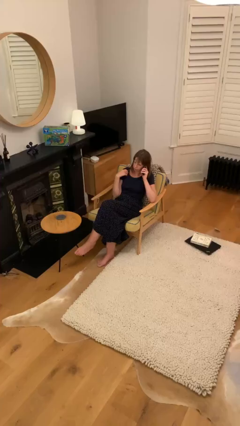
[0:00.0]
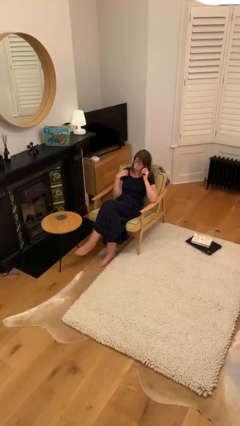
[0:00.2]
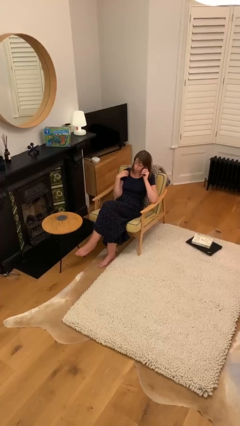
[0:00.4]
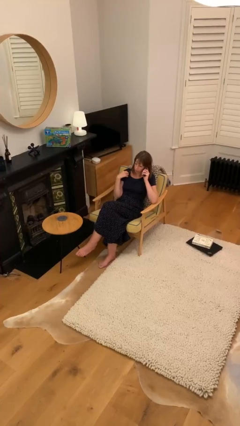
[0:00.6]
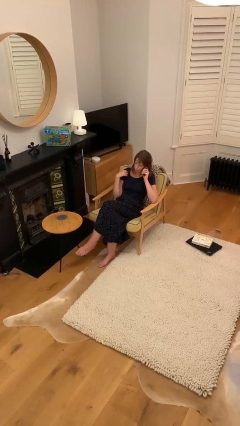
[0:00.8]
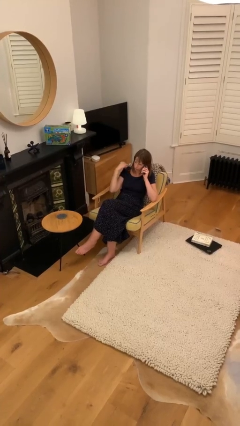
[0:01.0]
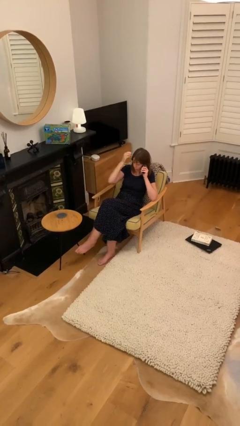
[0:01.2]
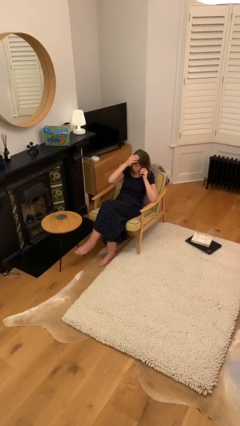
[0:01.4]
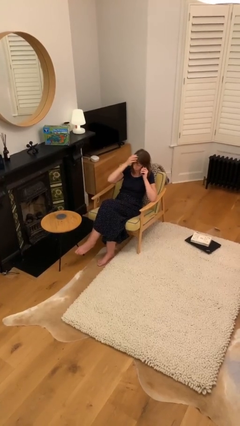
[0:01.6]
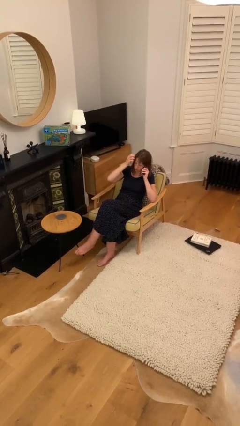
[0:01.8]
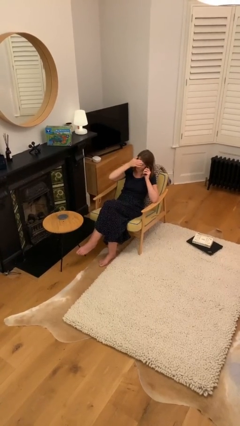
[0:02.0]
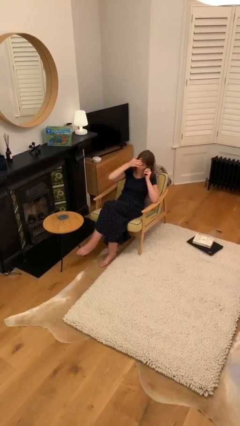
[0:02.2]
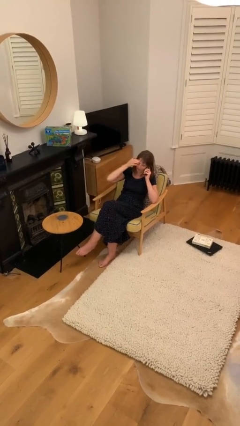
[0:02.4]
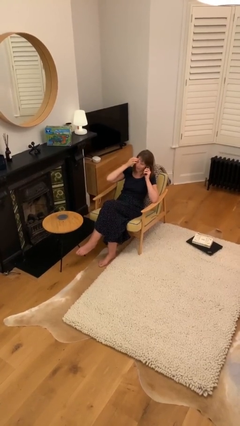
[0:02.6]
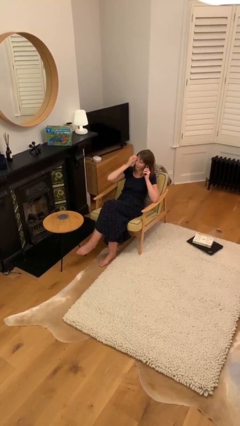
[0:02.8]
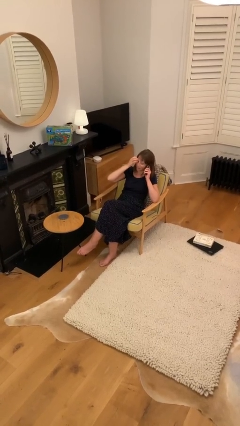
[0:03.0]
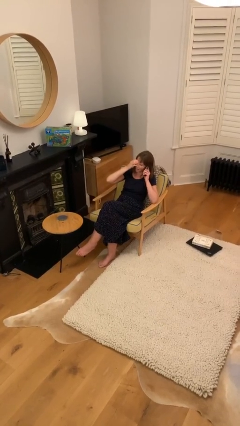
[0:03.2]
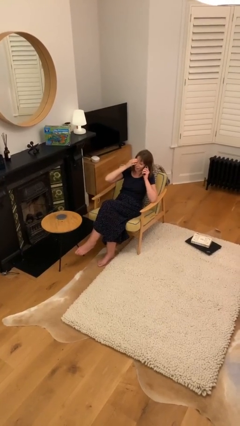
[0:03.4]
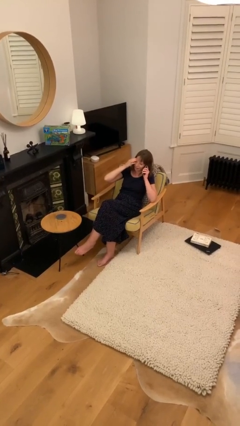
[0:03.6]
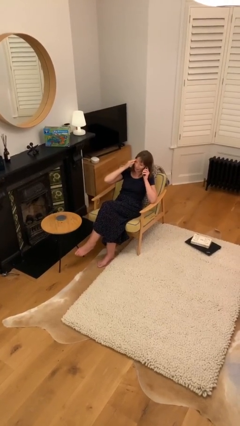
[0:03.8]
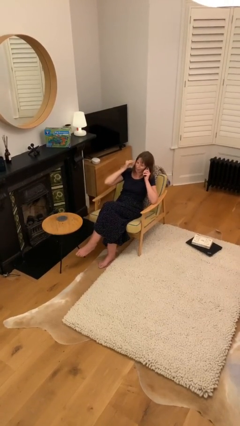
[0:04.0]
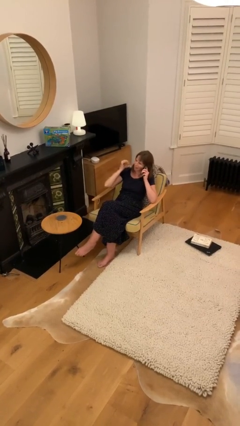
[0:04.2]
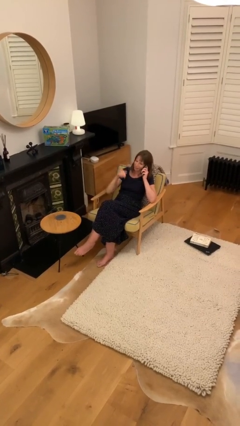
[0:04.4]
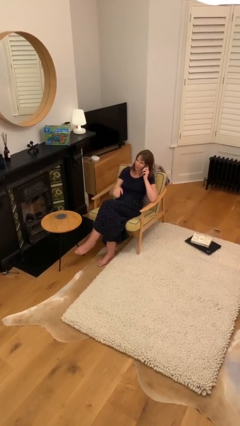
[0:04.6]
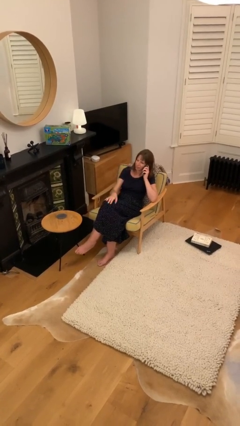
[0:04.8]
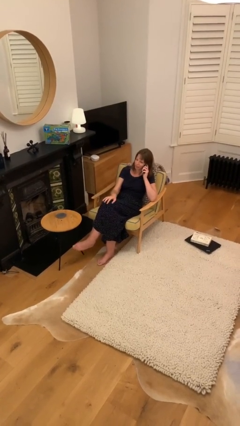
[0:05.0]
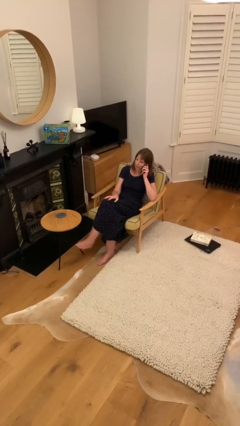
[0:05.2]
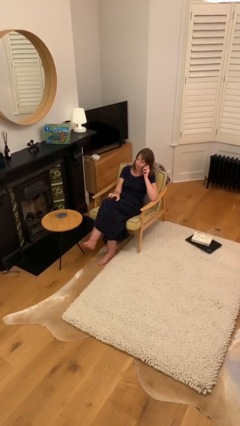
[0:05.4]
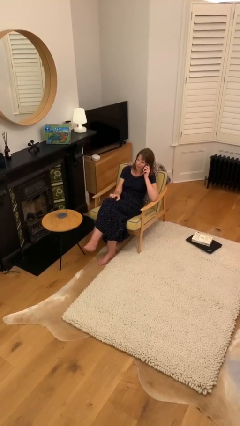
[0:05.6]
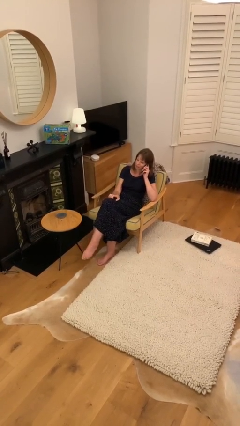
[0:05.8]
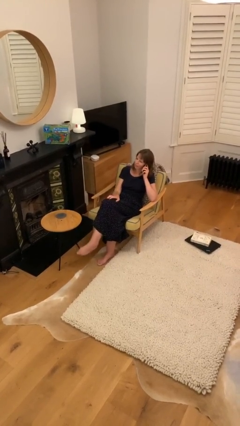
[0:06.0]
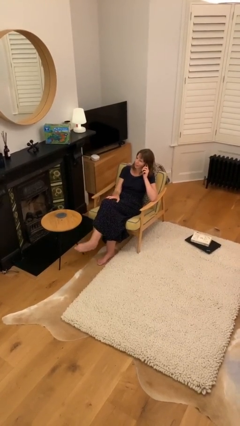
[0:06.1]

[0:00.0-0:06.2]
person talks on phone

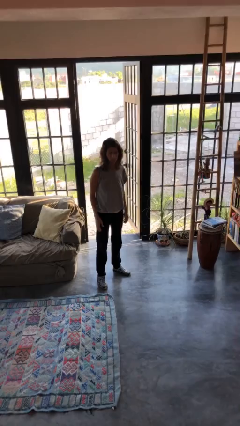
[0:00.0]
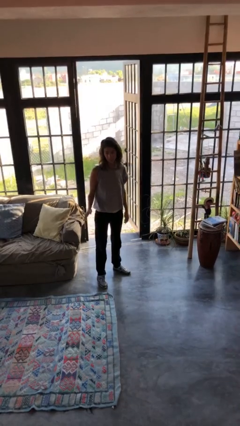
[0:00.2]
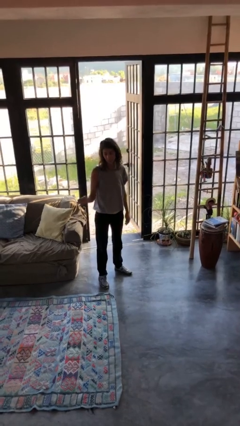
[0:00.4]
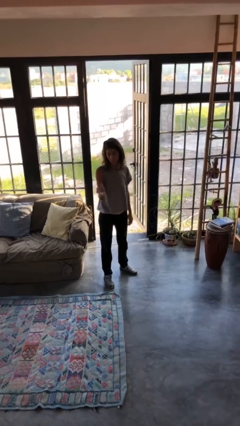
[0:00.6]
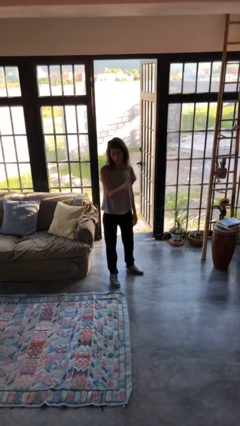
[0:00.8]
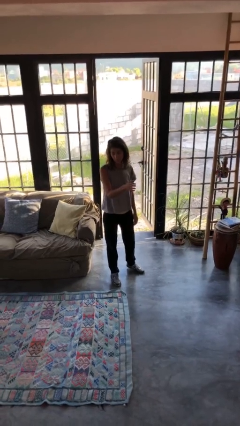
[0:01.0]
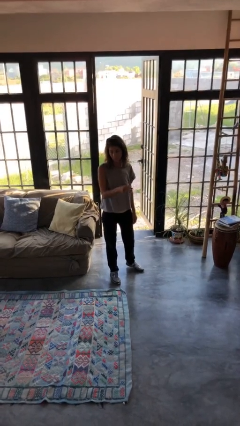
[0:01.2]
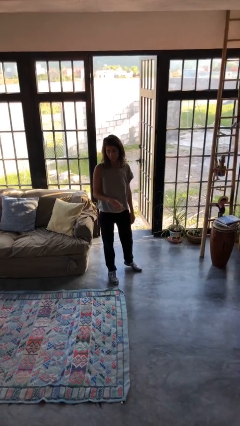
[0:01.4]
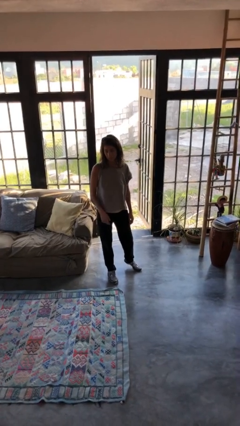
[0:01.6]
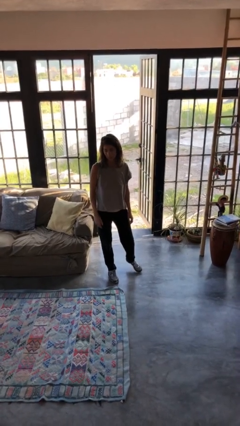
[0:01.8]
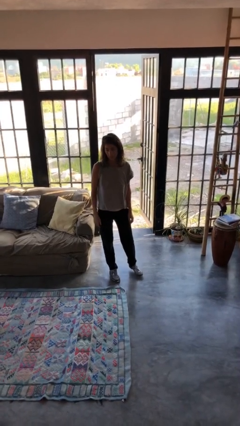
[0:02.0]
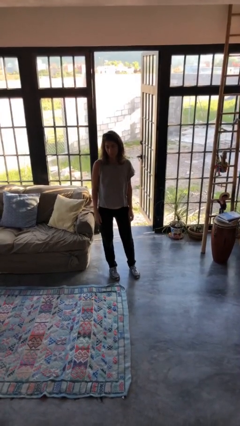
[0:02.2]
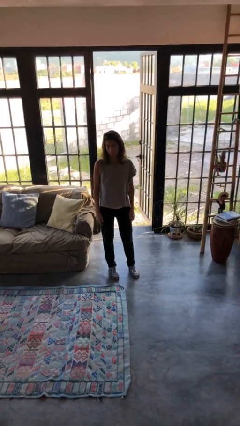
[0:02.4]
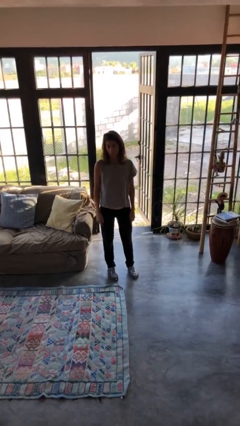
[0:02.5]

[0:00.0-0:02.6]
person gestures swipe left

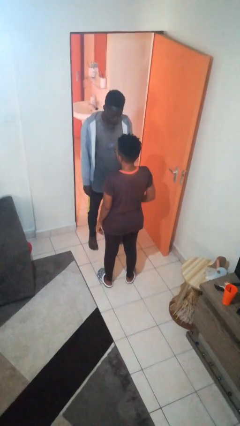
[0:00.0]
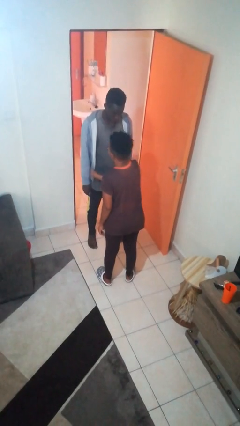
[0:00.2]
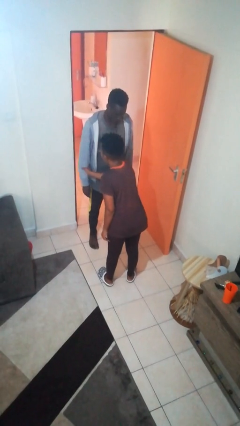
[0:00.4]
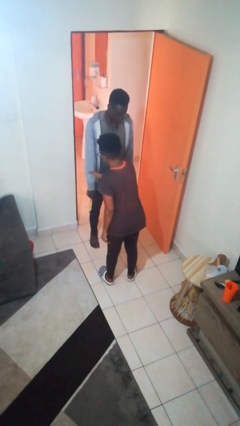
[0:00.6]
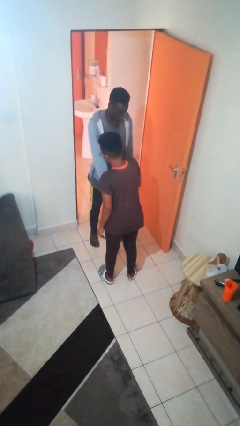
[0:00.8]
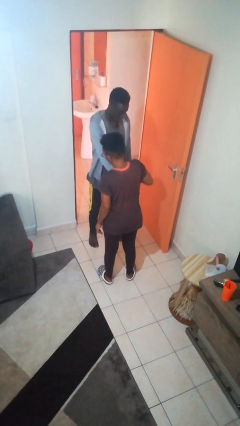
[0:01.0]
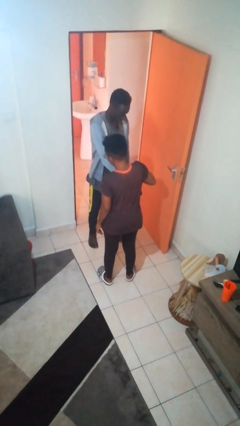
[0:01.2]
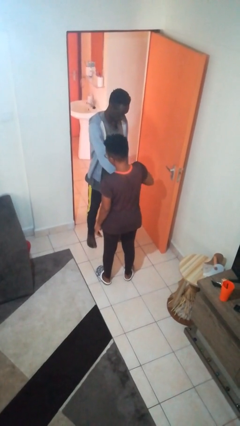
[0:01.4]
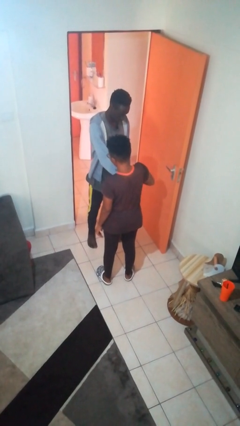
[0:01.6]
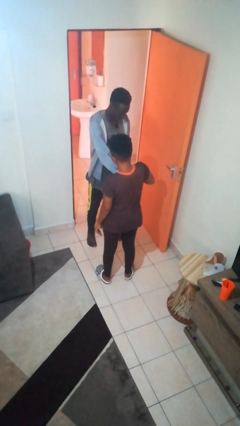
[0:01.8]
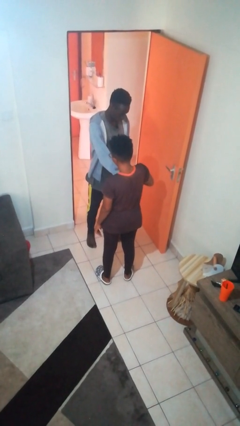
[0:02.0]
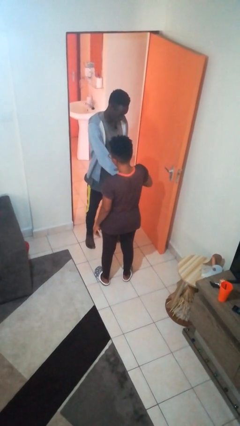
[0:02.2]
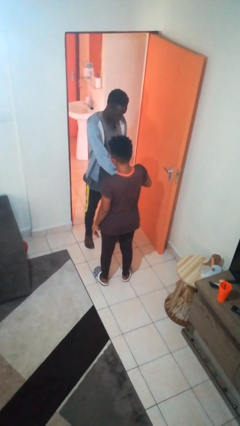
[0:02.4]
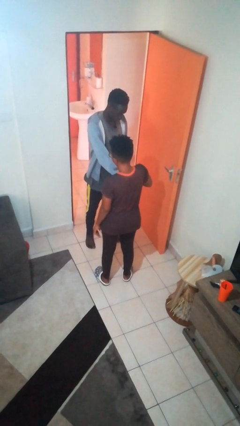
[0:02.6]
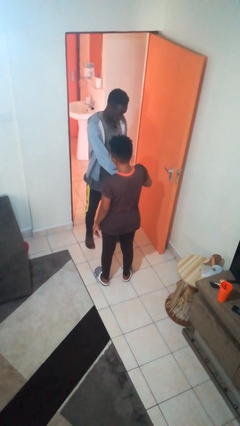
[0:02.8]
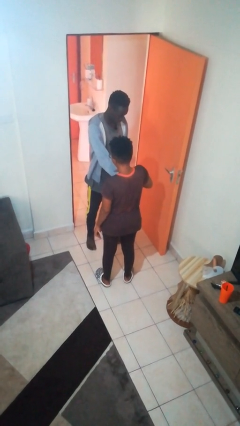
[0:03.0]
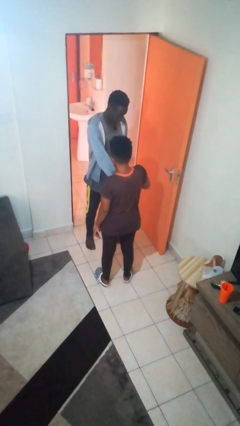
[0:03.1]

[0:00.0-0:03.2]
person grabs person by forearm

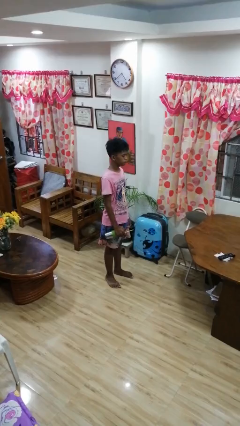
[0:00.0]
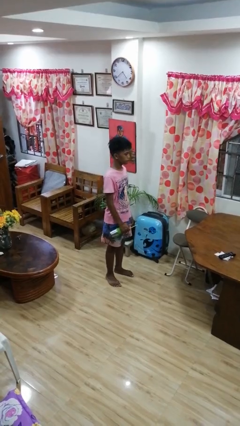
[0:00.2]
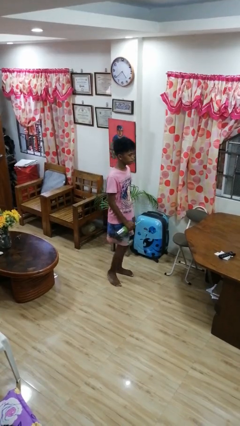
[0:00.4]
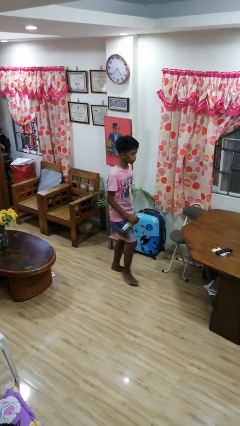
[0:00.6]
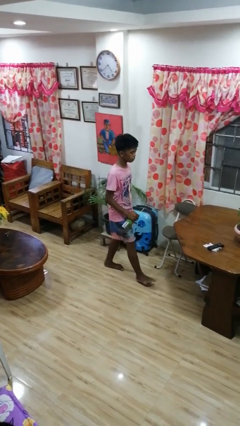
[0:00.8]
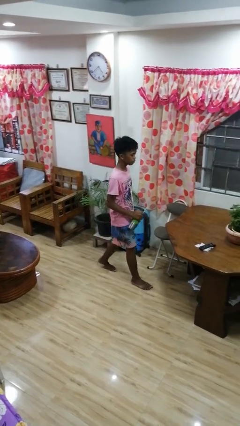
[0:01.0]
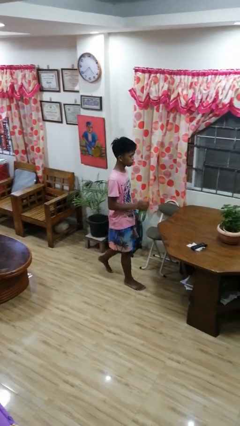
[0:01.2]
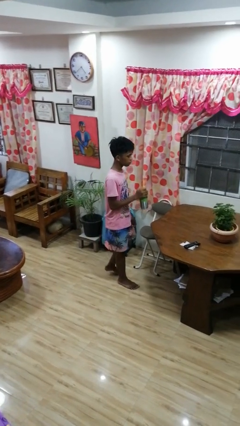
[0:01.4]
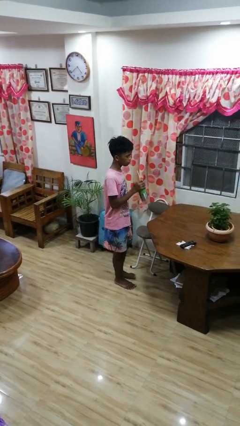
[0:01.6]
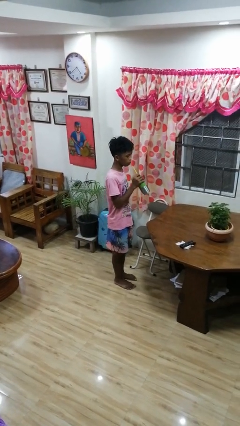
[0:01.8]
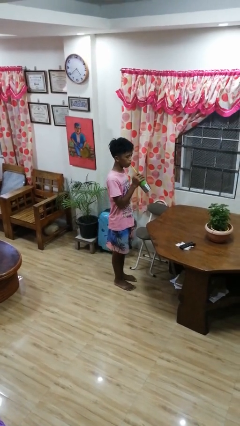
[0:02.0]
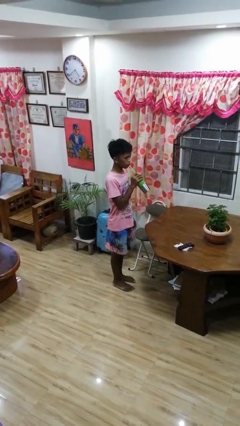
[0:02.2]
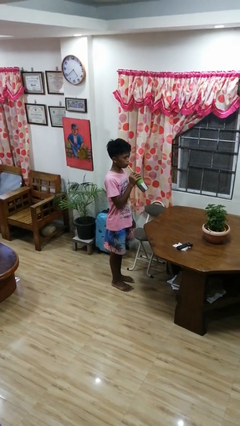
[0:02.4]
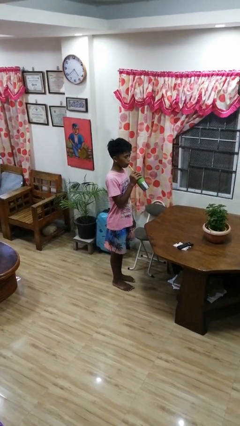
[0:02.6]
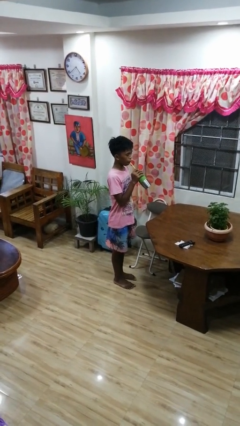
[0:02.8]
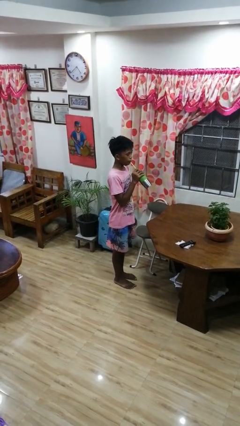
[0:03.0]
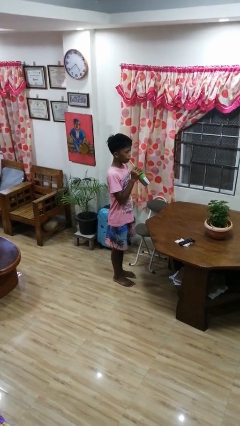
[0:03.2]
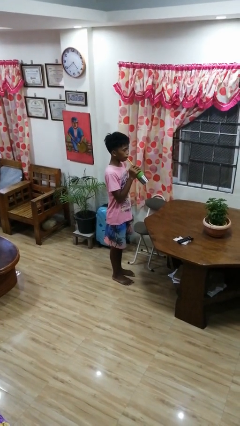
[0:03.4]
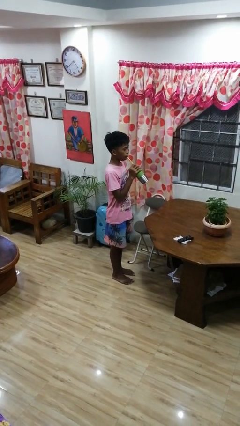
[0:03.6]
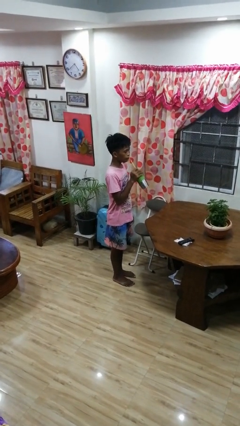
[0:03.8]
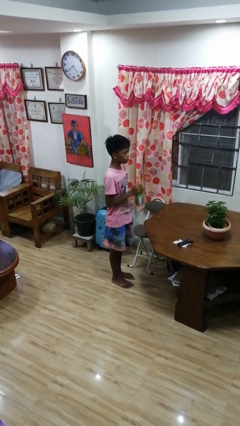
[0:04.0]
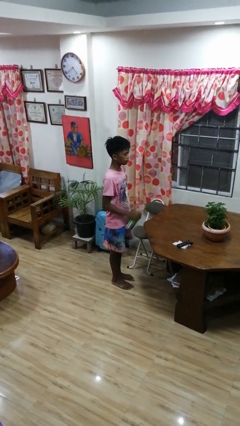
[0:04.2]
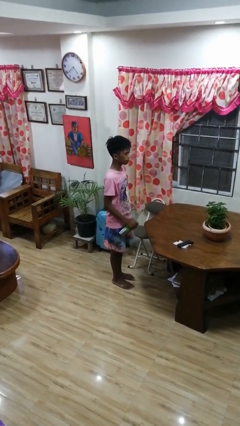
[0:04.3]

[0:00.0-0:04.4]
person drinks from straw

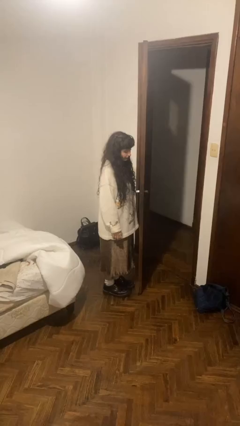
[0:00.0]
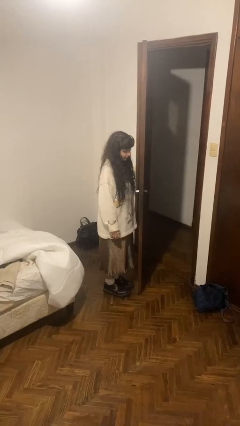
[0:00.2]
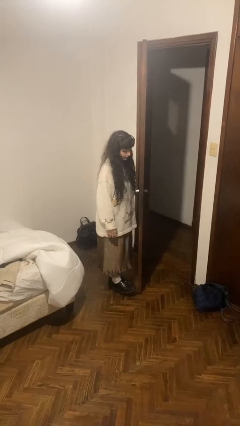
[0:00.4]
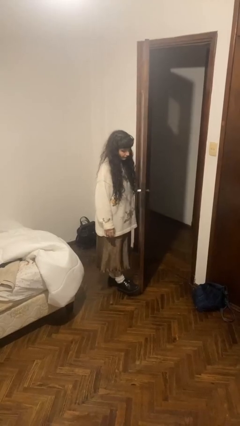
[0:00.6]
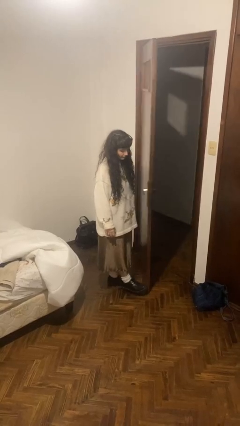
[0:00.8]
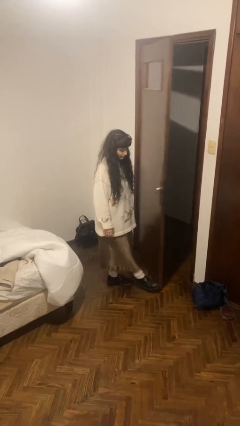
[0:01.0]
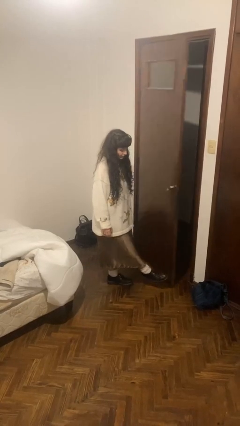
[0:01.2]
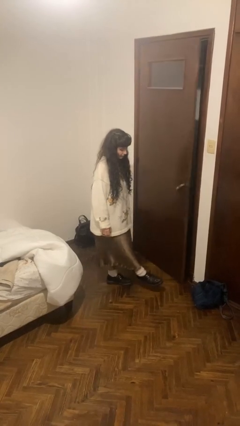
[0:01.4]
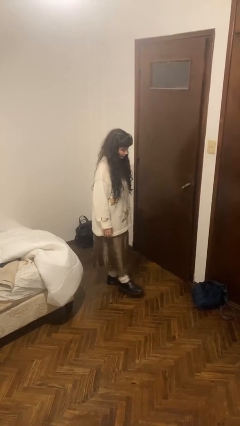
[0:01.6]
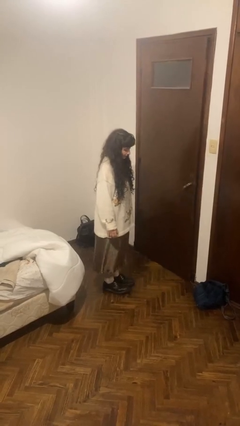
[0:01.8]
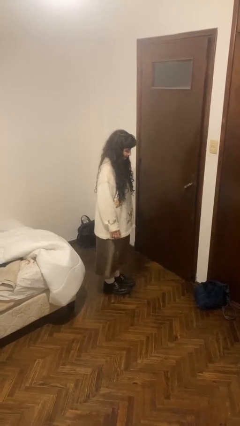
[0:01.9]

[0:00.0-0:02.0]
person closes door with foot
